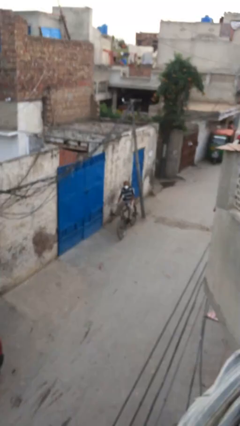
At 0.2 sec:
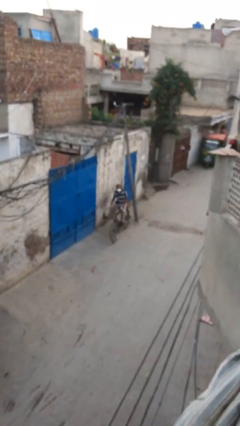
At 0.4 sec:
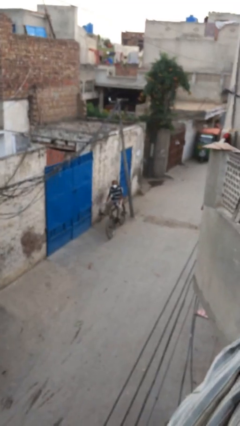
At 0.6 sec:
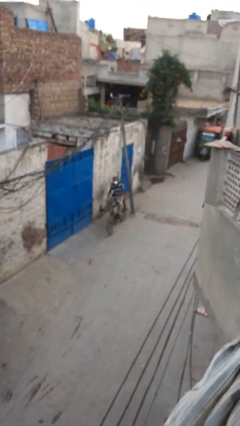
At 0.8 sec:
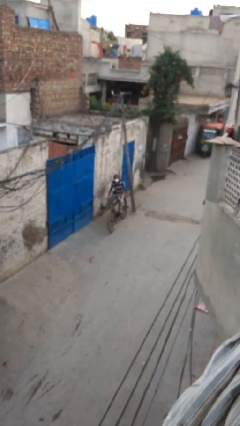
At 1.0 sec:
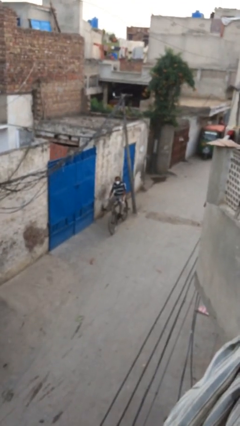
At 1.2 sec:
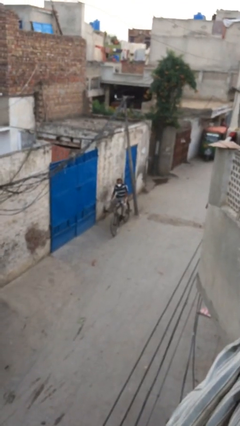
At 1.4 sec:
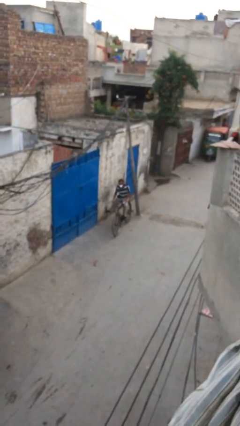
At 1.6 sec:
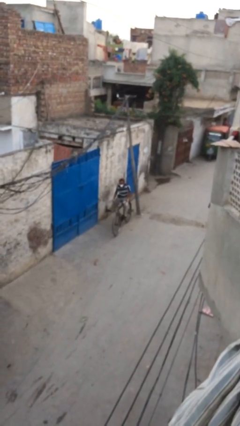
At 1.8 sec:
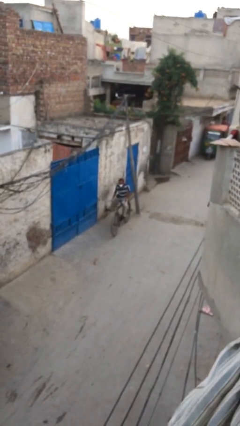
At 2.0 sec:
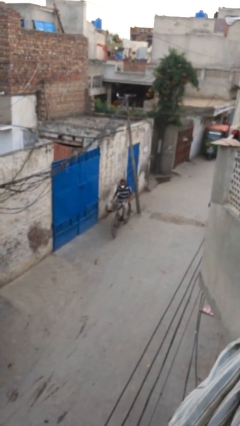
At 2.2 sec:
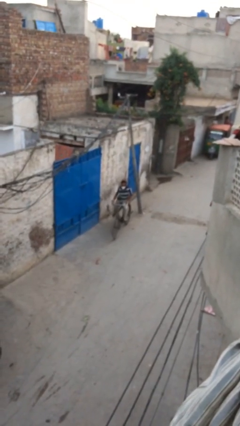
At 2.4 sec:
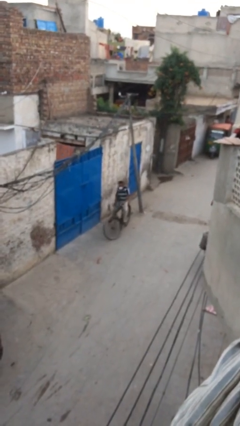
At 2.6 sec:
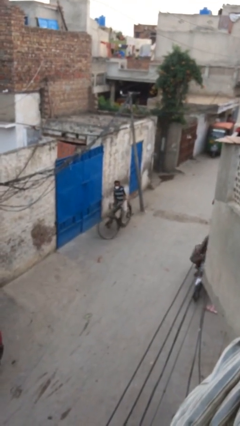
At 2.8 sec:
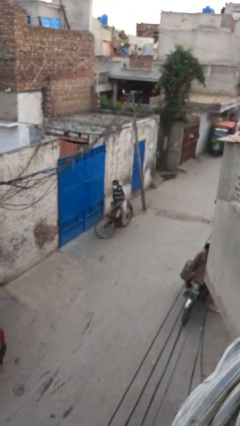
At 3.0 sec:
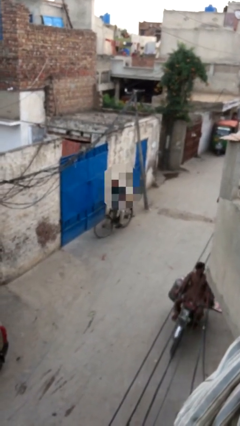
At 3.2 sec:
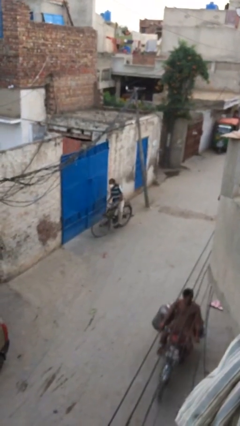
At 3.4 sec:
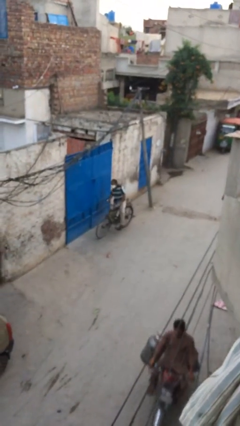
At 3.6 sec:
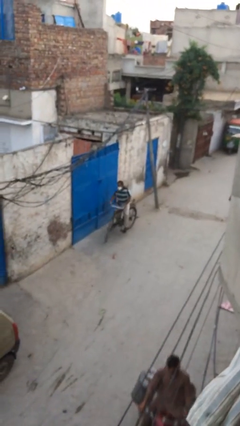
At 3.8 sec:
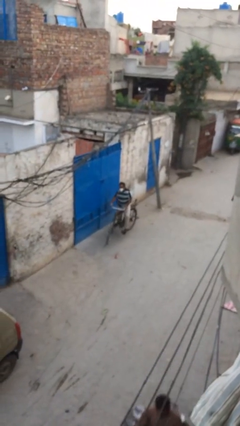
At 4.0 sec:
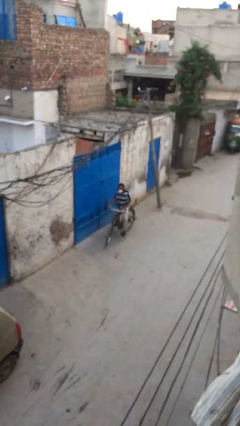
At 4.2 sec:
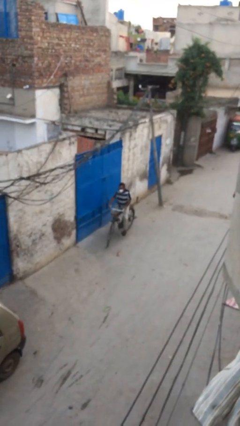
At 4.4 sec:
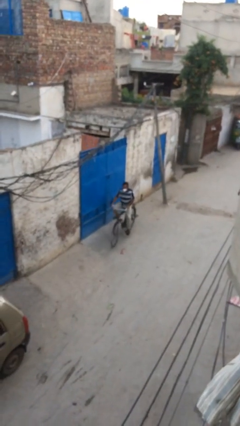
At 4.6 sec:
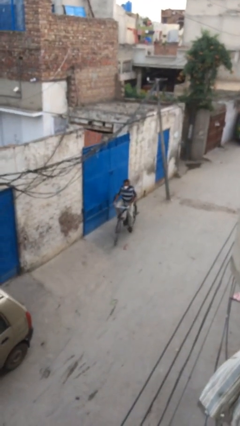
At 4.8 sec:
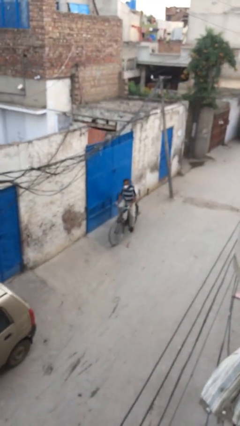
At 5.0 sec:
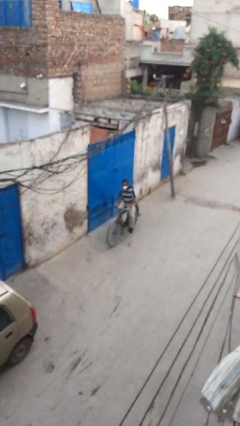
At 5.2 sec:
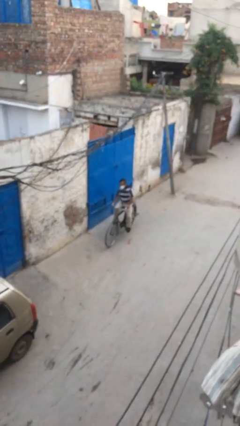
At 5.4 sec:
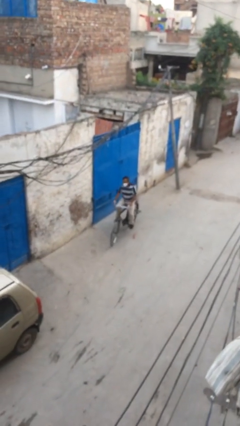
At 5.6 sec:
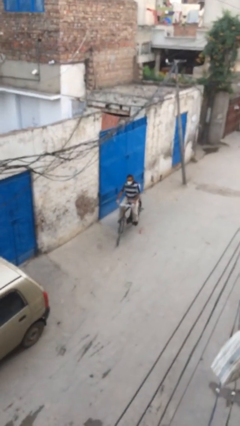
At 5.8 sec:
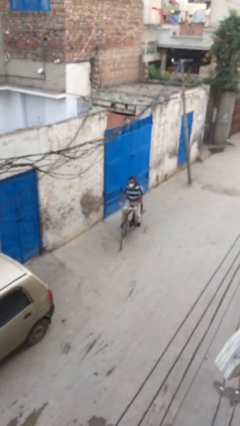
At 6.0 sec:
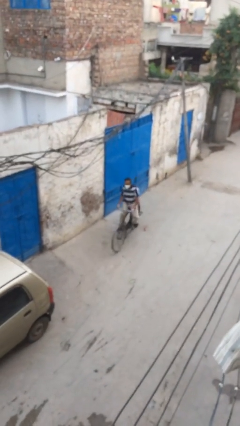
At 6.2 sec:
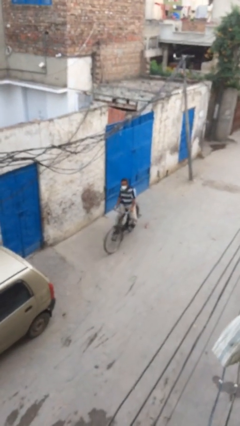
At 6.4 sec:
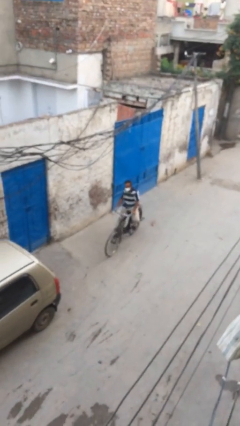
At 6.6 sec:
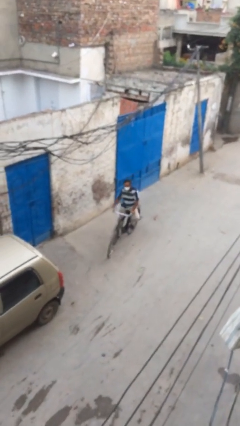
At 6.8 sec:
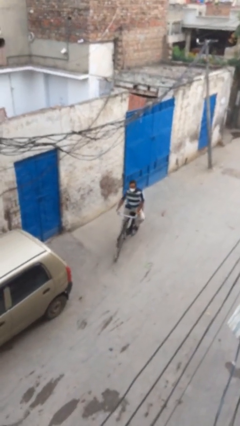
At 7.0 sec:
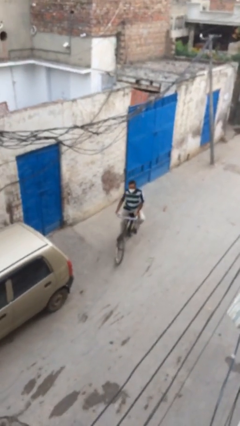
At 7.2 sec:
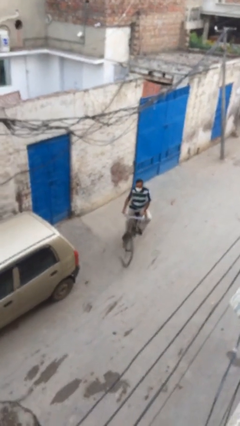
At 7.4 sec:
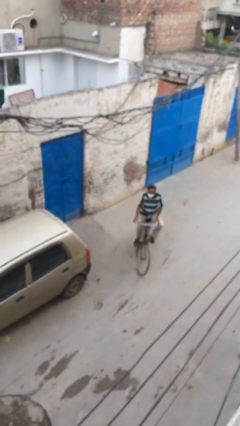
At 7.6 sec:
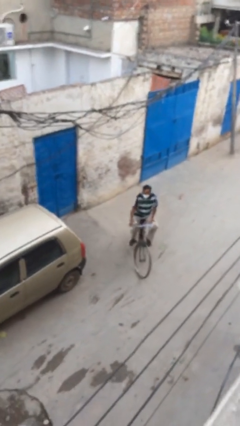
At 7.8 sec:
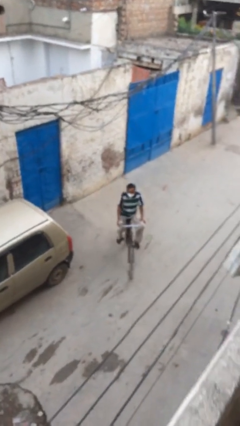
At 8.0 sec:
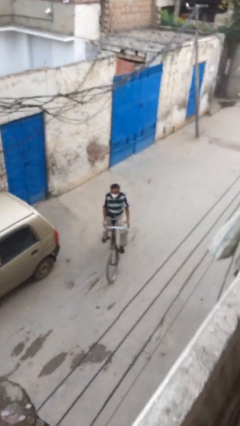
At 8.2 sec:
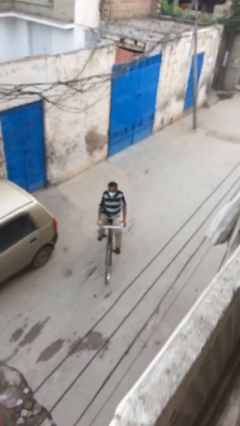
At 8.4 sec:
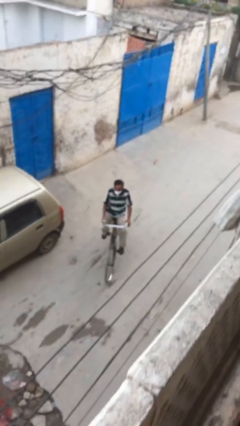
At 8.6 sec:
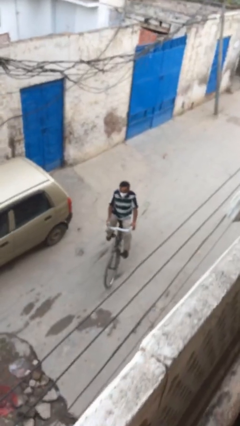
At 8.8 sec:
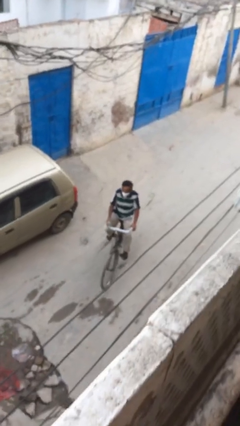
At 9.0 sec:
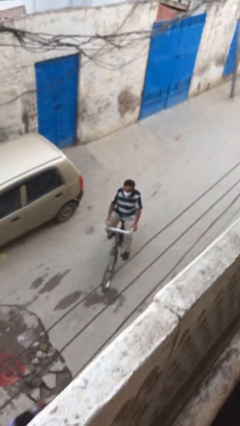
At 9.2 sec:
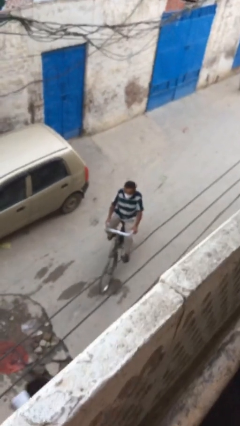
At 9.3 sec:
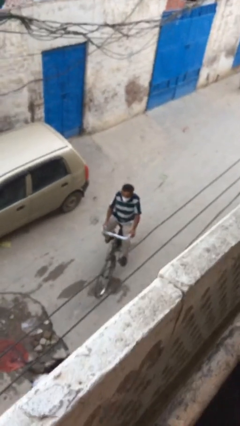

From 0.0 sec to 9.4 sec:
person rides bicycle

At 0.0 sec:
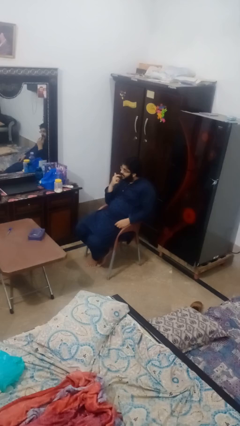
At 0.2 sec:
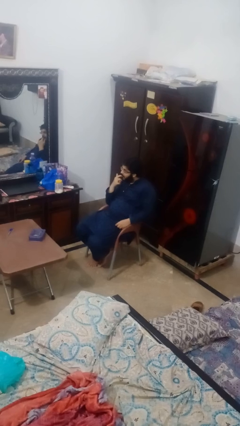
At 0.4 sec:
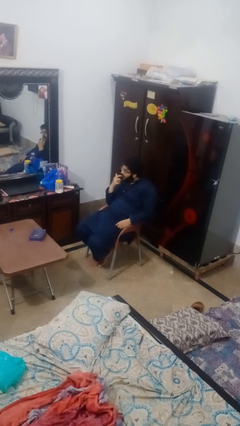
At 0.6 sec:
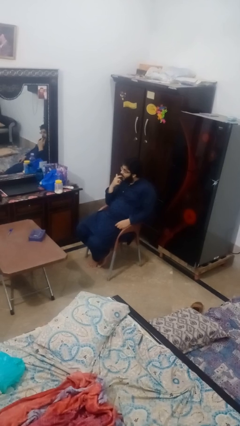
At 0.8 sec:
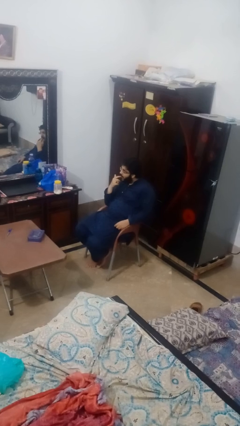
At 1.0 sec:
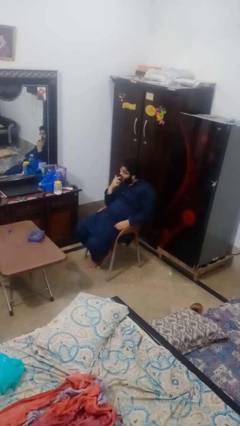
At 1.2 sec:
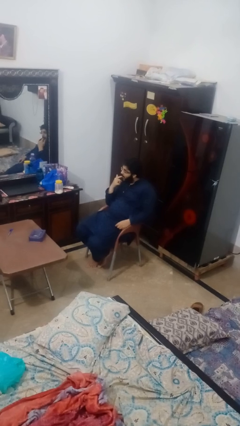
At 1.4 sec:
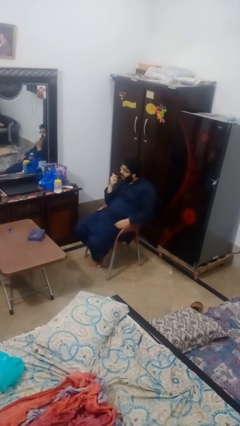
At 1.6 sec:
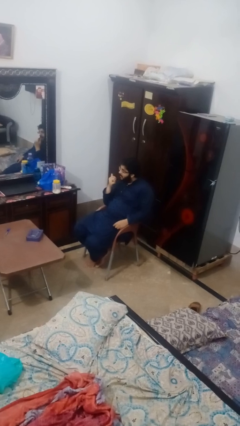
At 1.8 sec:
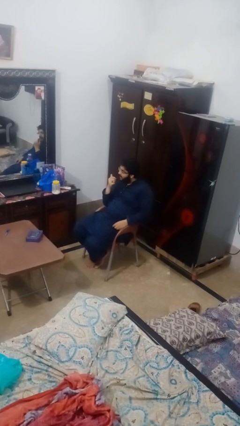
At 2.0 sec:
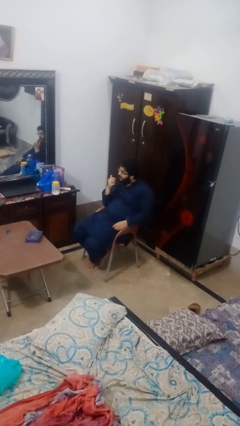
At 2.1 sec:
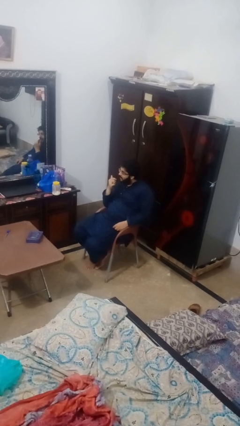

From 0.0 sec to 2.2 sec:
person licks fingers

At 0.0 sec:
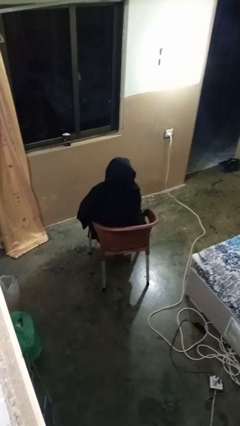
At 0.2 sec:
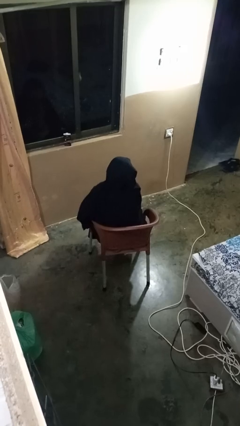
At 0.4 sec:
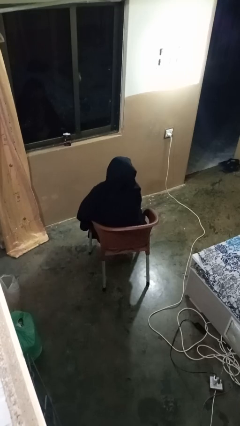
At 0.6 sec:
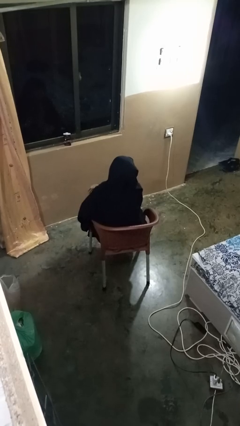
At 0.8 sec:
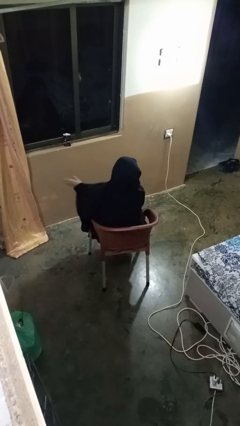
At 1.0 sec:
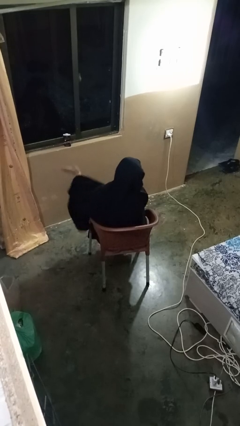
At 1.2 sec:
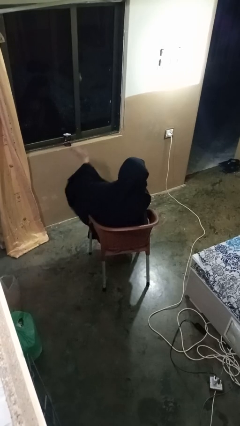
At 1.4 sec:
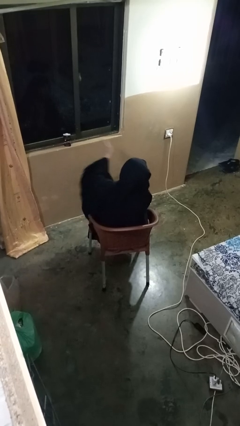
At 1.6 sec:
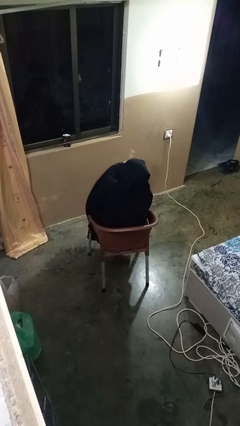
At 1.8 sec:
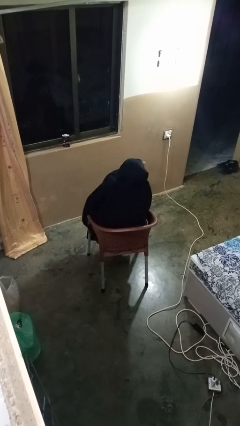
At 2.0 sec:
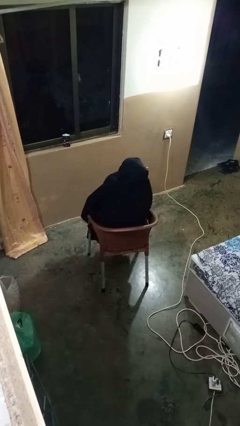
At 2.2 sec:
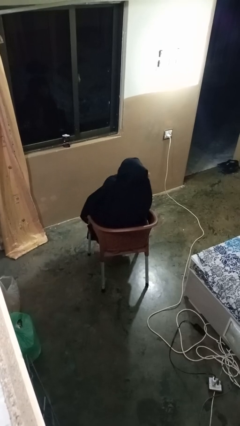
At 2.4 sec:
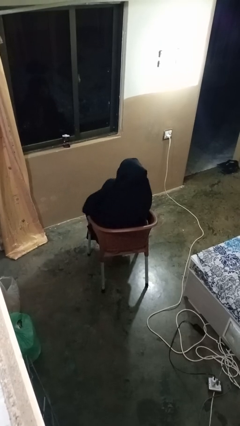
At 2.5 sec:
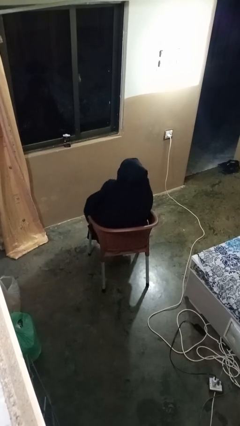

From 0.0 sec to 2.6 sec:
person gestures swipe right

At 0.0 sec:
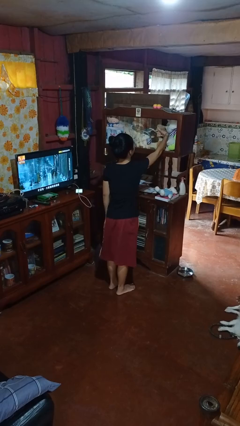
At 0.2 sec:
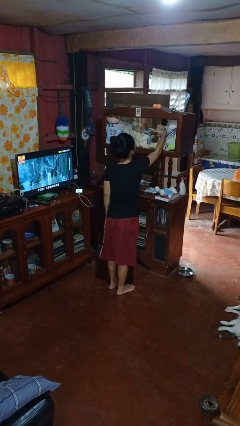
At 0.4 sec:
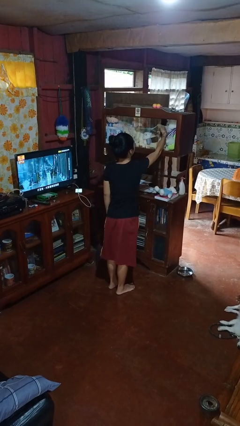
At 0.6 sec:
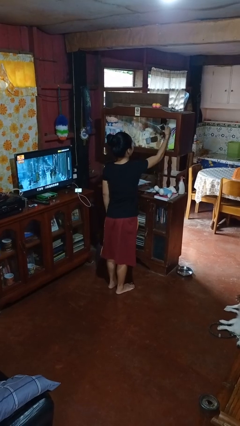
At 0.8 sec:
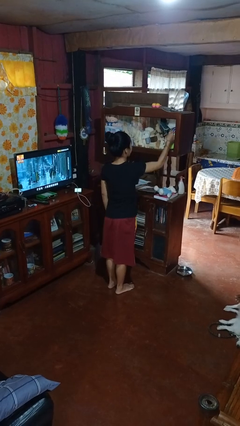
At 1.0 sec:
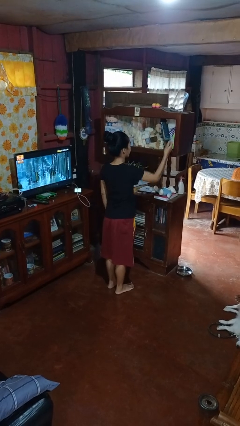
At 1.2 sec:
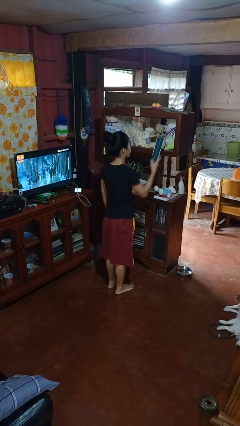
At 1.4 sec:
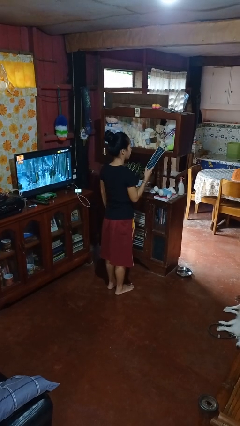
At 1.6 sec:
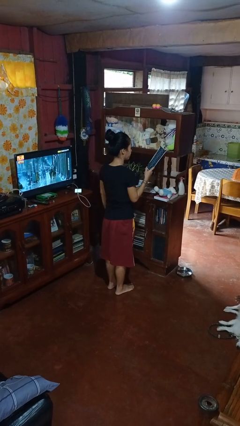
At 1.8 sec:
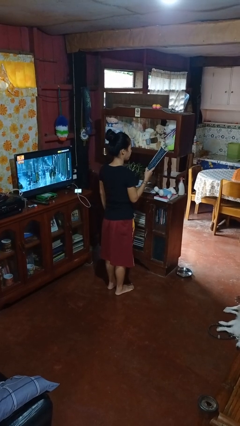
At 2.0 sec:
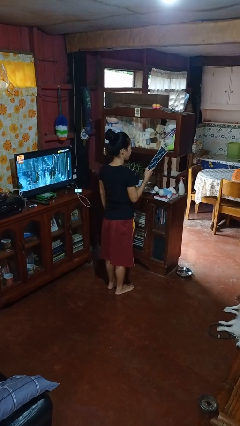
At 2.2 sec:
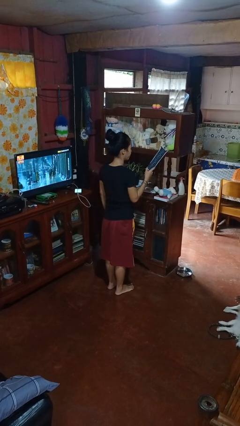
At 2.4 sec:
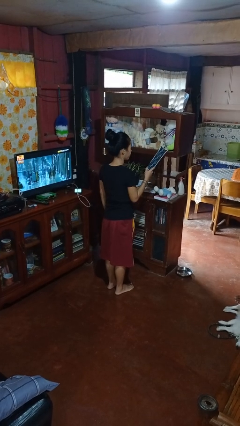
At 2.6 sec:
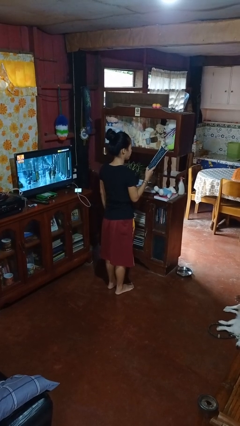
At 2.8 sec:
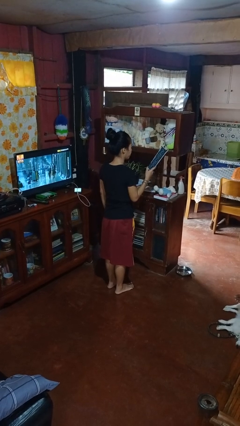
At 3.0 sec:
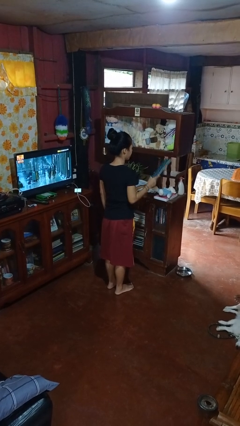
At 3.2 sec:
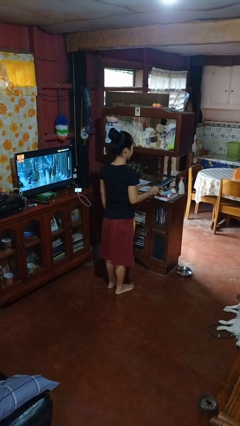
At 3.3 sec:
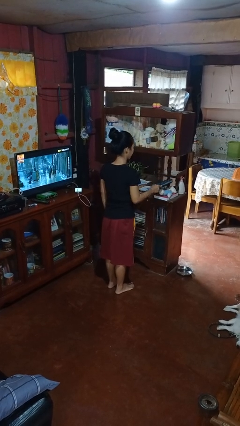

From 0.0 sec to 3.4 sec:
person picks up object from shelf

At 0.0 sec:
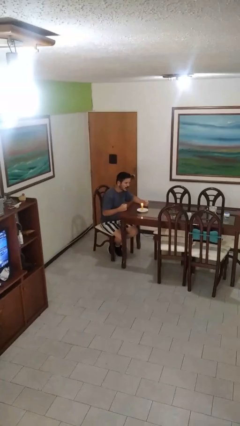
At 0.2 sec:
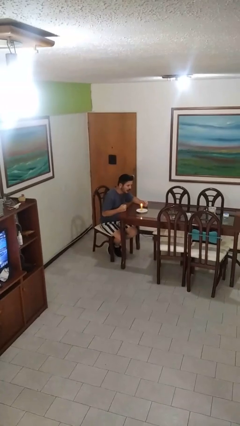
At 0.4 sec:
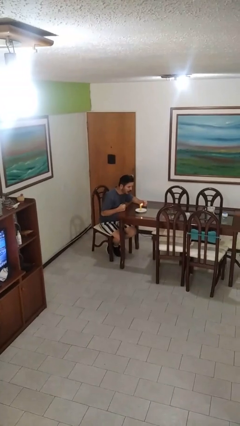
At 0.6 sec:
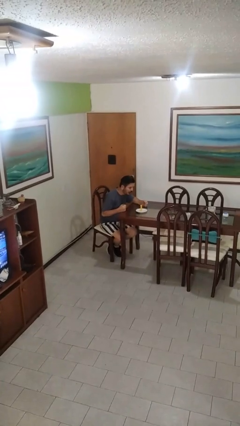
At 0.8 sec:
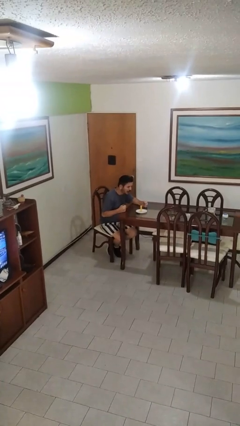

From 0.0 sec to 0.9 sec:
person extinguishes candle
